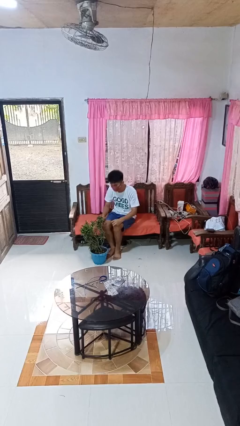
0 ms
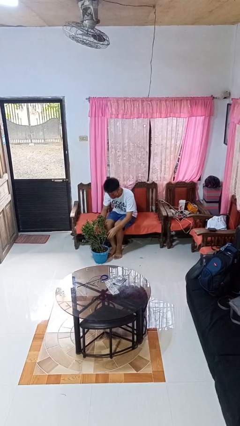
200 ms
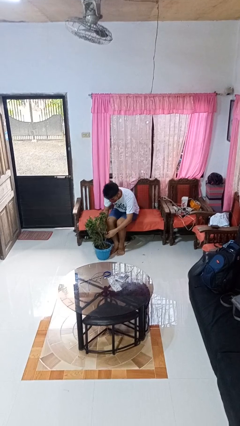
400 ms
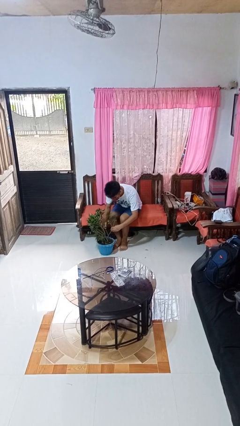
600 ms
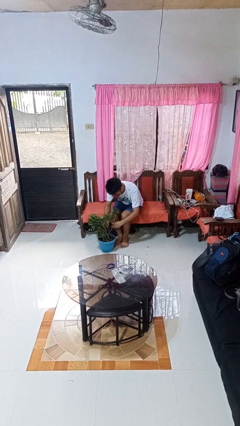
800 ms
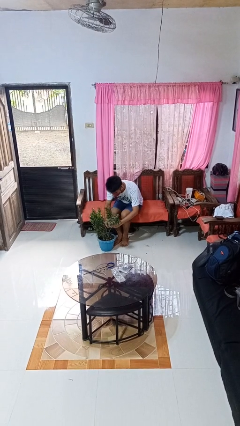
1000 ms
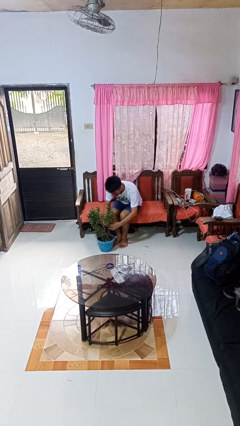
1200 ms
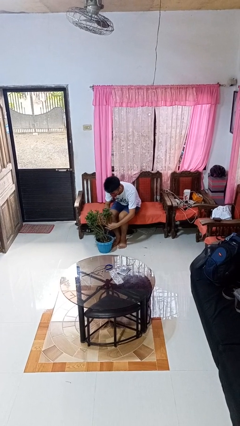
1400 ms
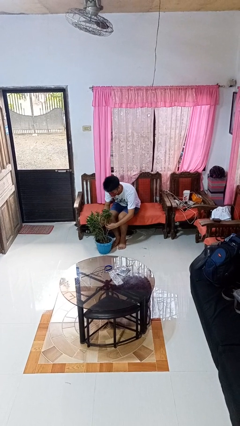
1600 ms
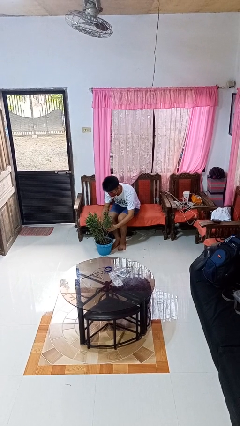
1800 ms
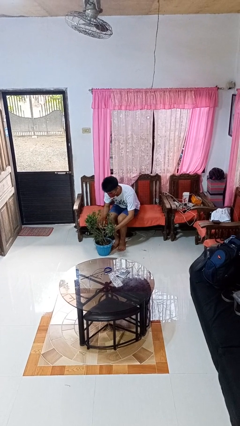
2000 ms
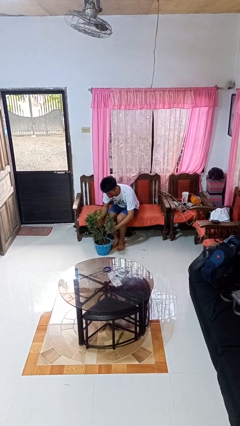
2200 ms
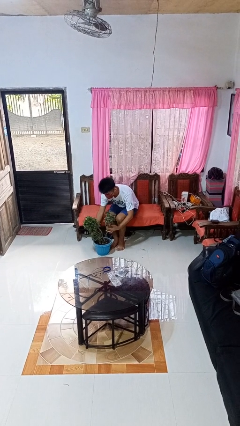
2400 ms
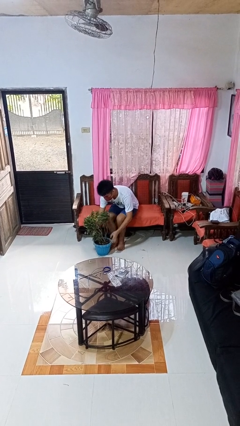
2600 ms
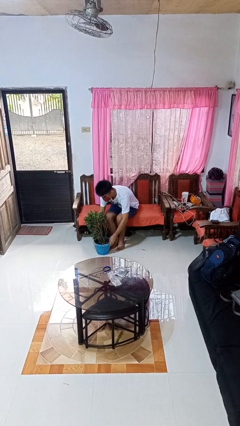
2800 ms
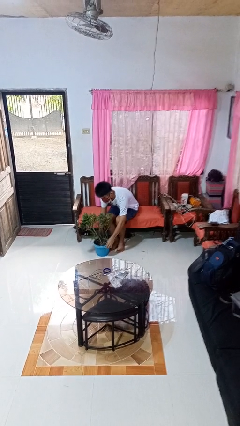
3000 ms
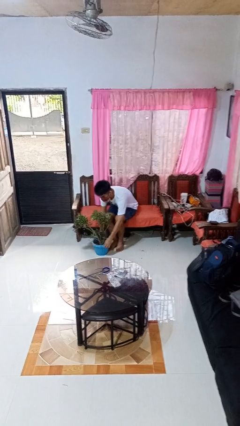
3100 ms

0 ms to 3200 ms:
person arranges flowers in vase

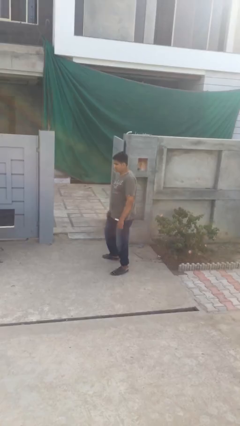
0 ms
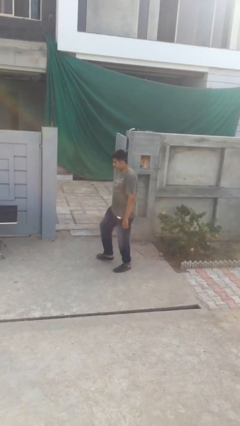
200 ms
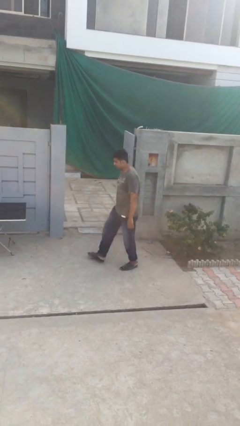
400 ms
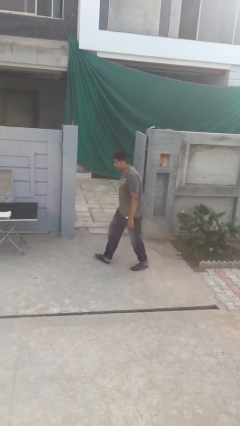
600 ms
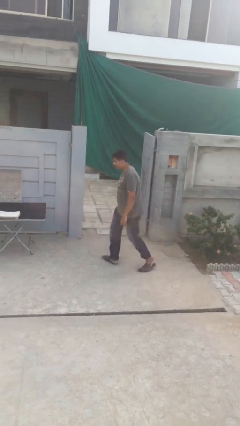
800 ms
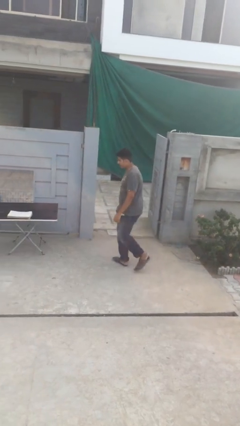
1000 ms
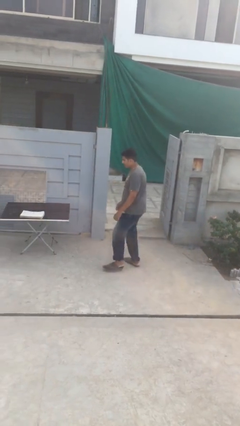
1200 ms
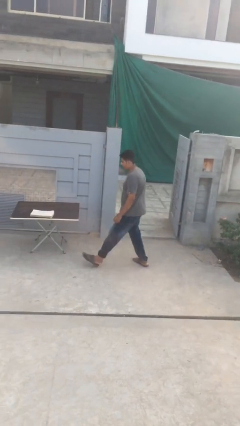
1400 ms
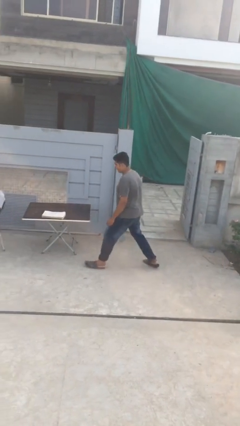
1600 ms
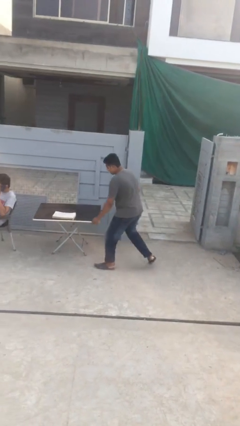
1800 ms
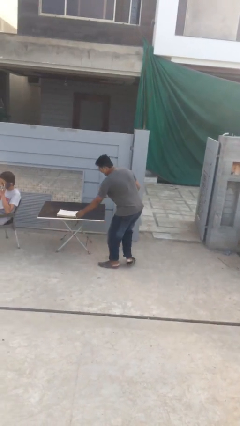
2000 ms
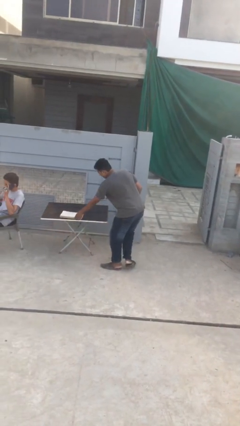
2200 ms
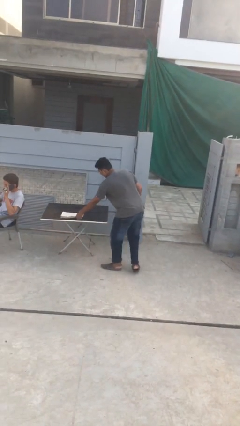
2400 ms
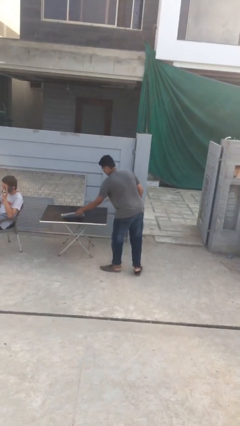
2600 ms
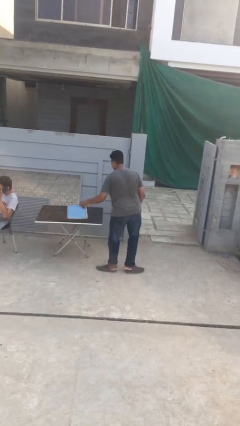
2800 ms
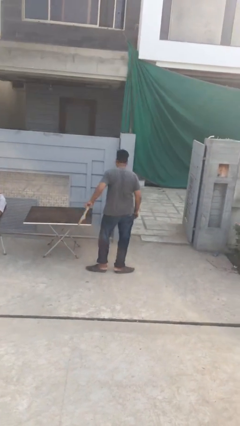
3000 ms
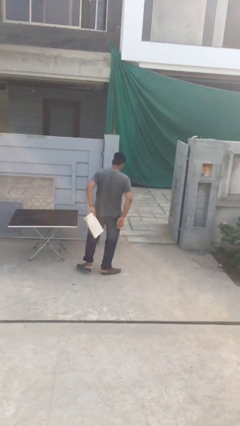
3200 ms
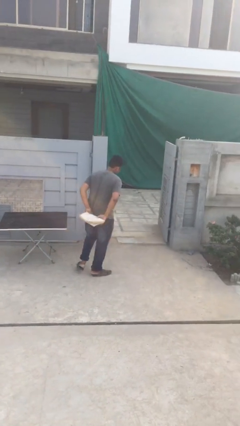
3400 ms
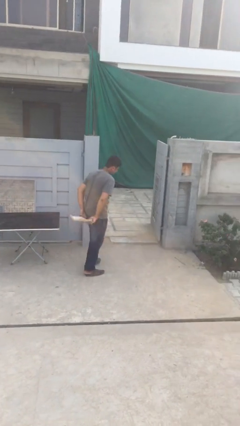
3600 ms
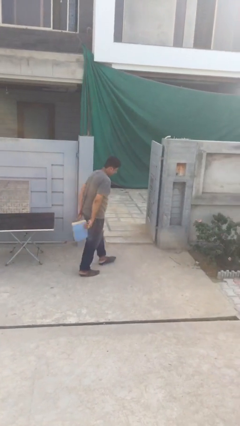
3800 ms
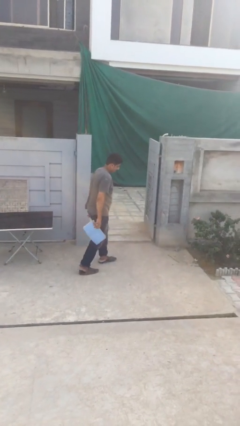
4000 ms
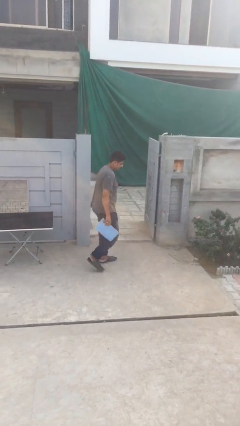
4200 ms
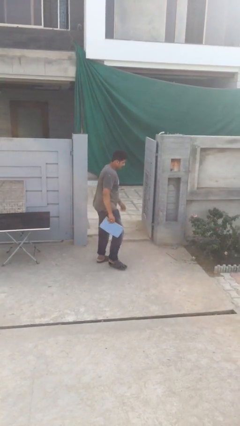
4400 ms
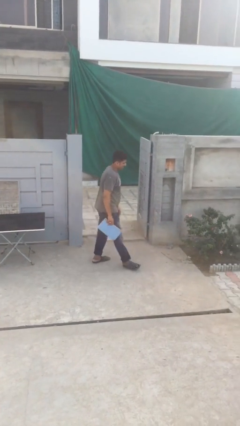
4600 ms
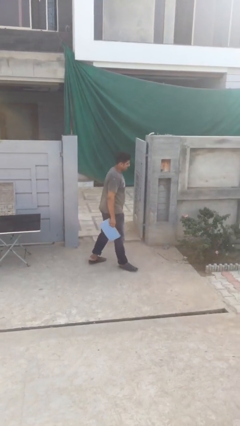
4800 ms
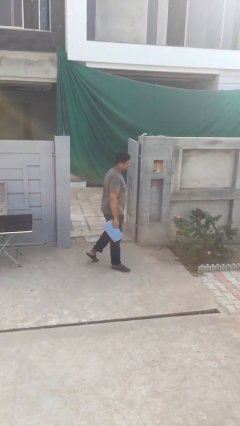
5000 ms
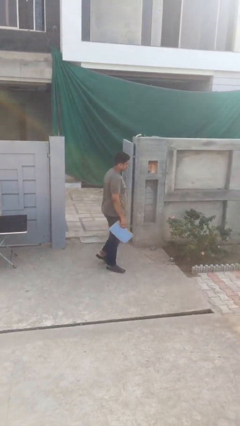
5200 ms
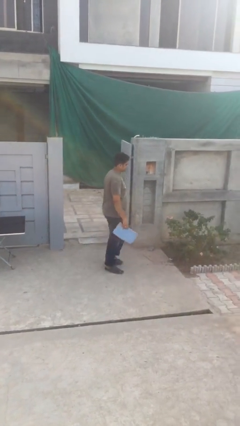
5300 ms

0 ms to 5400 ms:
person steals object from person

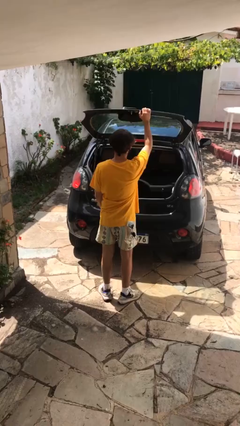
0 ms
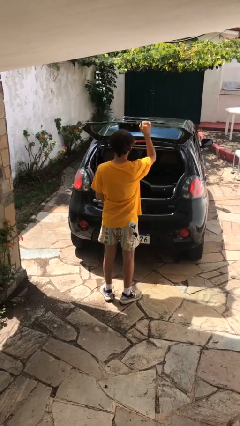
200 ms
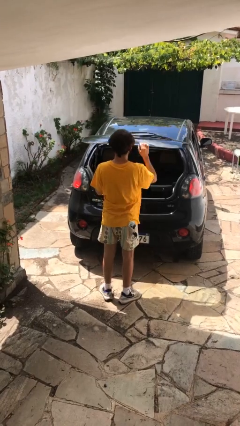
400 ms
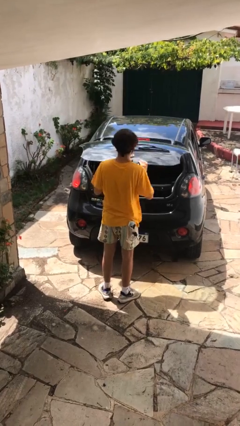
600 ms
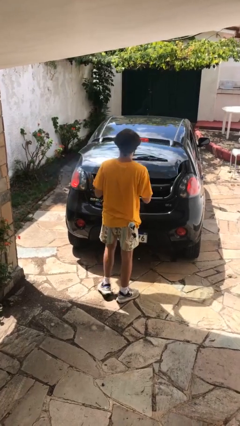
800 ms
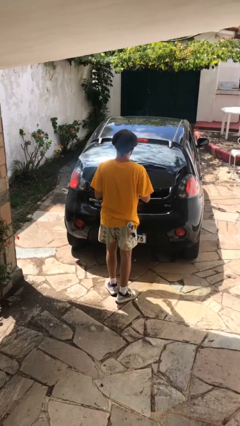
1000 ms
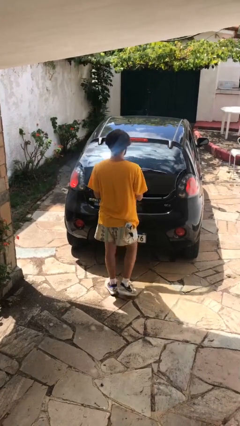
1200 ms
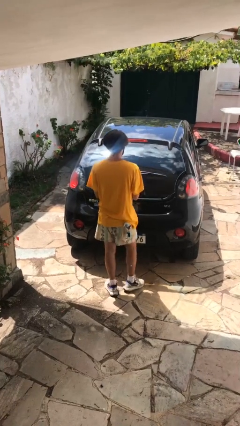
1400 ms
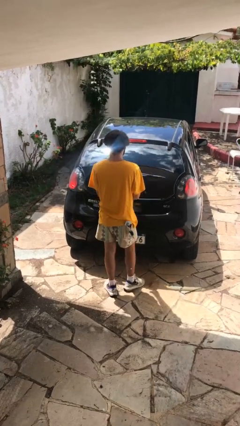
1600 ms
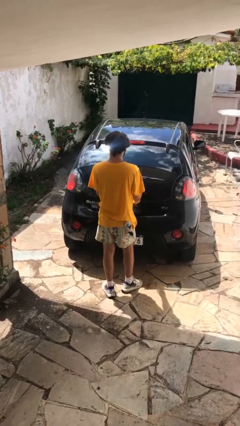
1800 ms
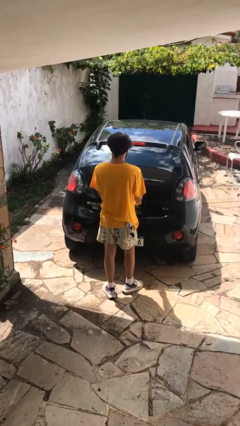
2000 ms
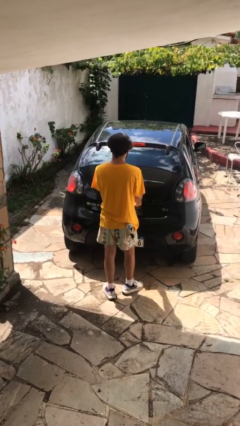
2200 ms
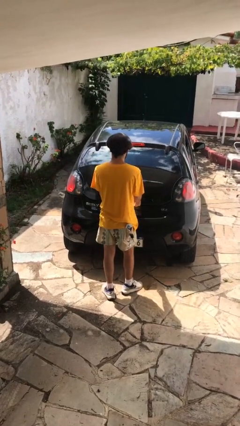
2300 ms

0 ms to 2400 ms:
person closes car trunk

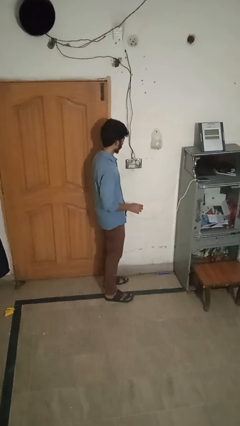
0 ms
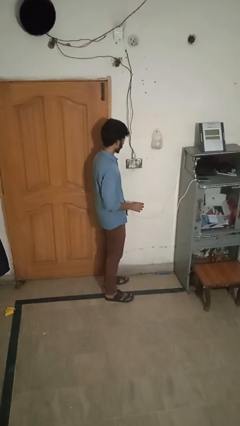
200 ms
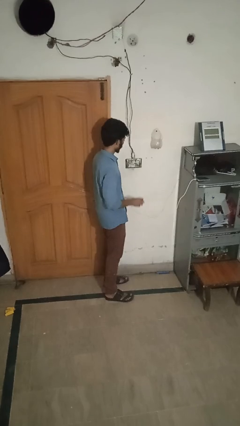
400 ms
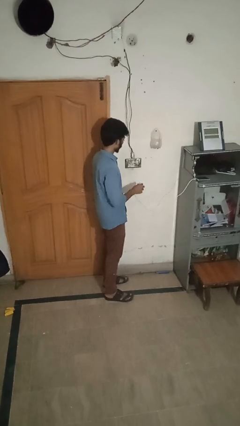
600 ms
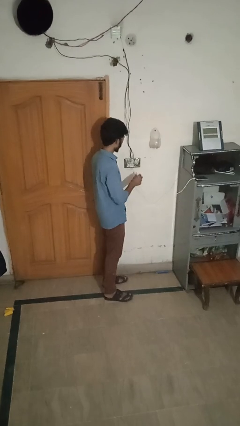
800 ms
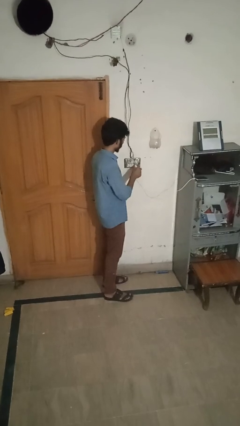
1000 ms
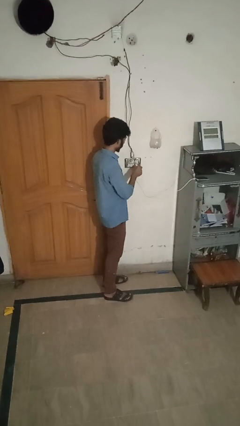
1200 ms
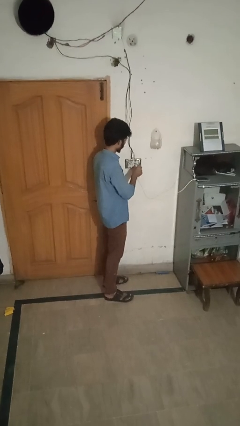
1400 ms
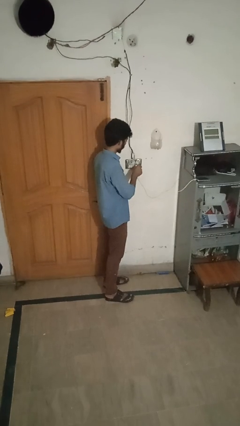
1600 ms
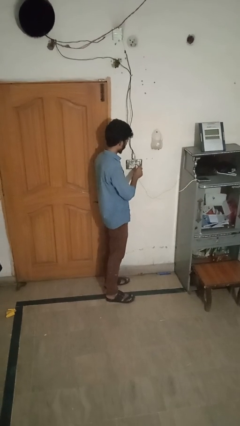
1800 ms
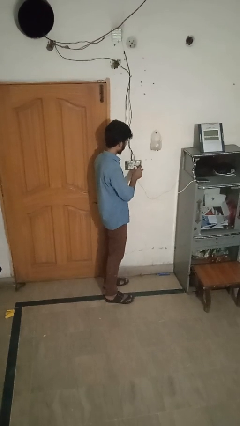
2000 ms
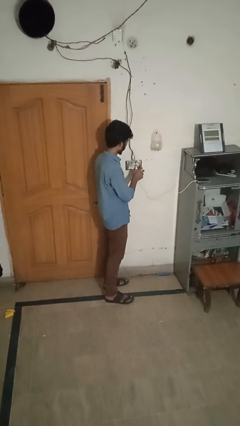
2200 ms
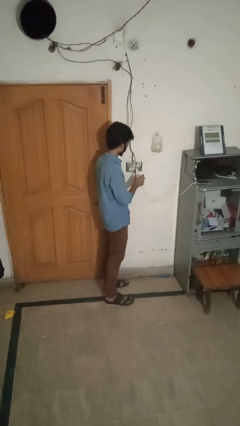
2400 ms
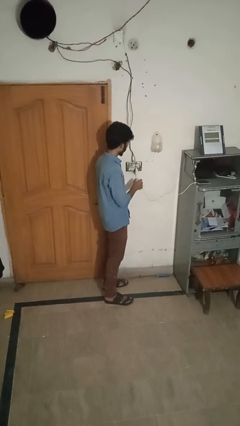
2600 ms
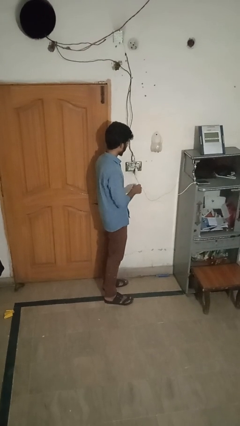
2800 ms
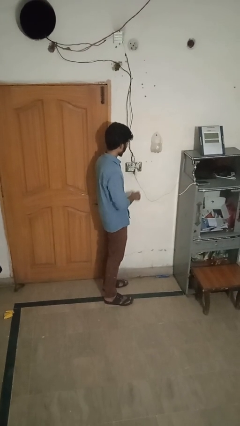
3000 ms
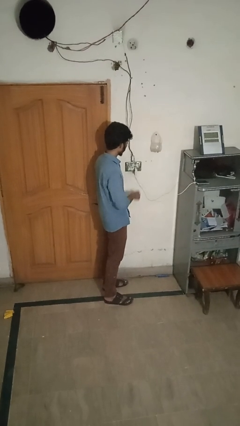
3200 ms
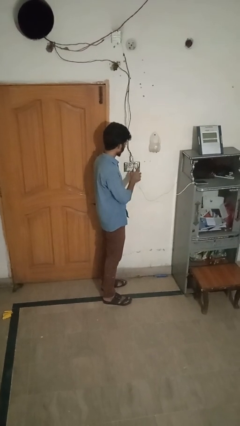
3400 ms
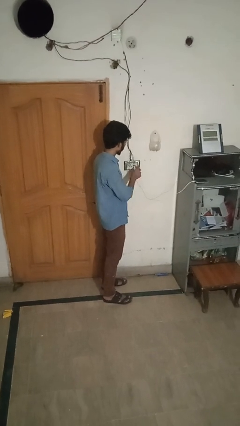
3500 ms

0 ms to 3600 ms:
person plugs into electrical socket

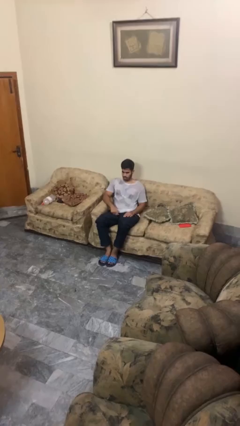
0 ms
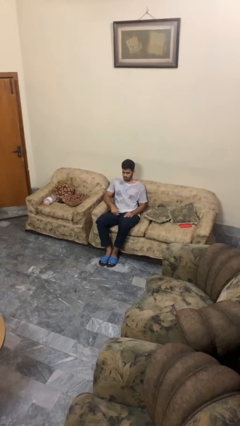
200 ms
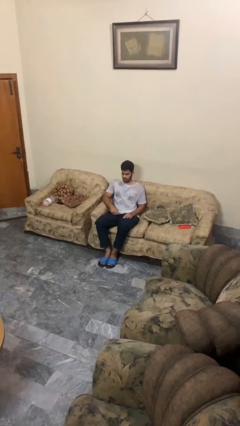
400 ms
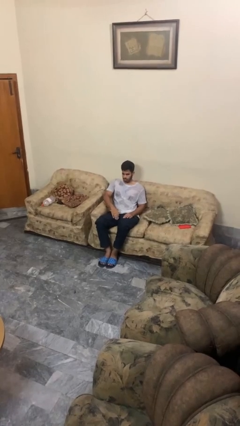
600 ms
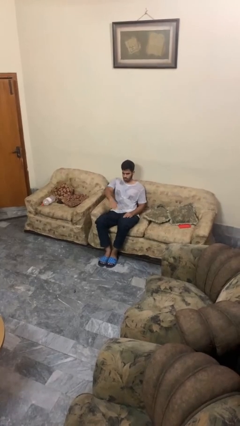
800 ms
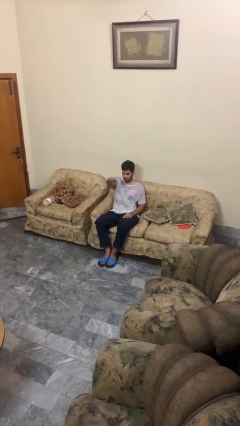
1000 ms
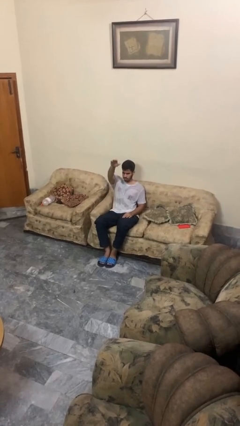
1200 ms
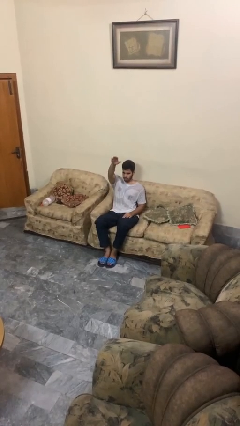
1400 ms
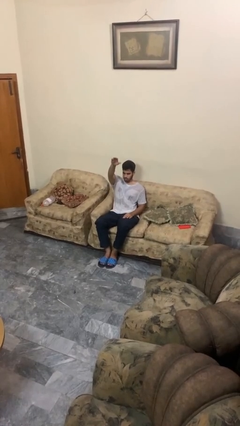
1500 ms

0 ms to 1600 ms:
person gestures swipe up

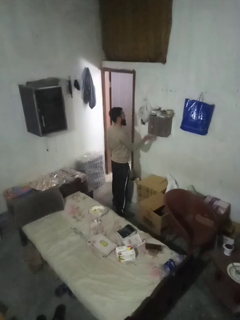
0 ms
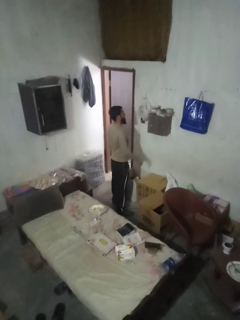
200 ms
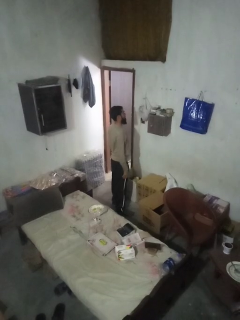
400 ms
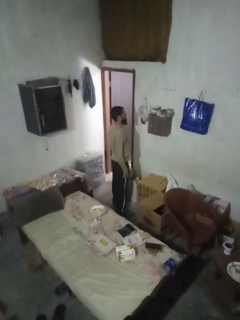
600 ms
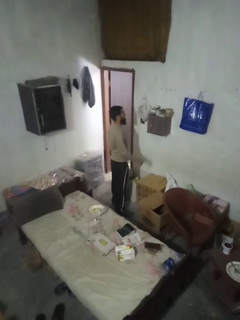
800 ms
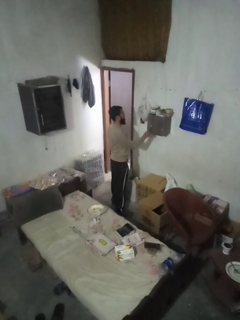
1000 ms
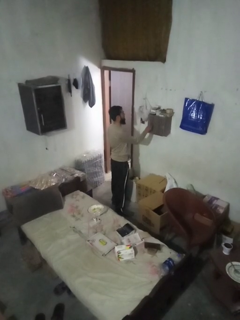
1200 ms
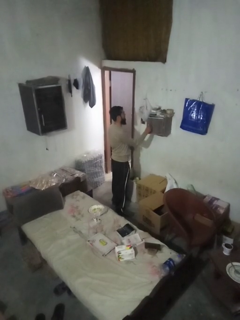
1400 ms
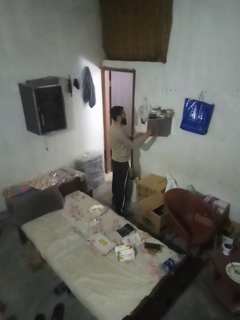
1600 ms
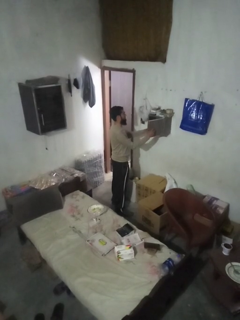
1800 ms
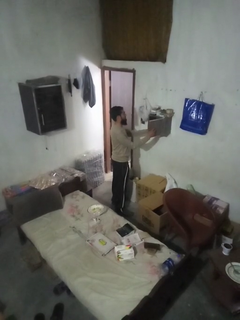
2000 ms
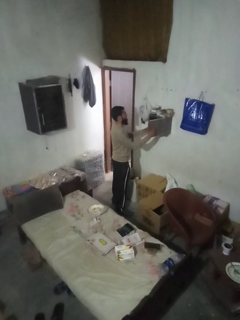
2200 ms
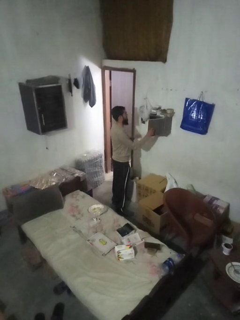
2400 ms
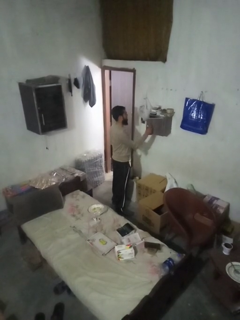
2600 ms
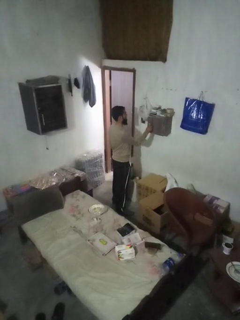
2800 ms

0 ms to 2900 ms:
person takes letters from mailbox
